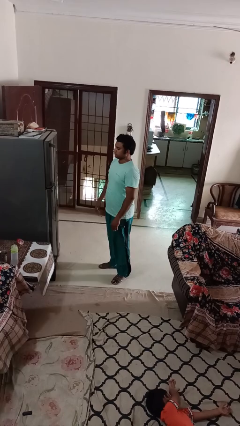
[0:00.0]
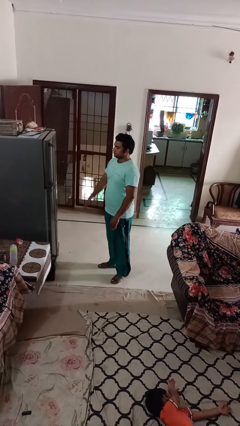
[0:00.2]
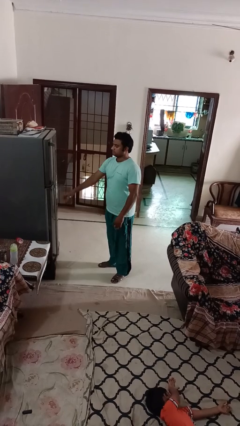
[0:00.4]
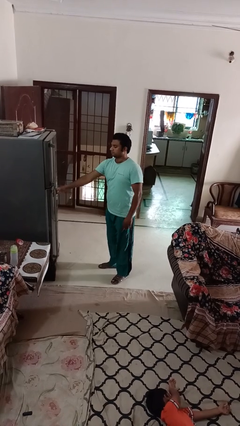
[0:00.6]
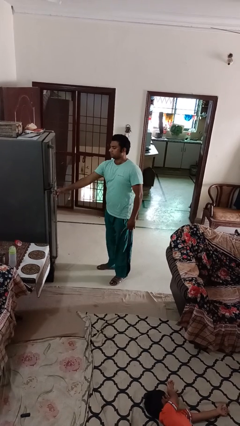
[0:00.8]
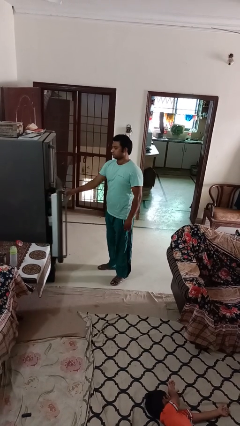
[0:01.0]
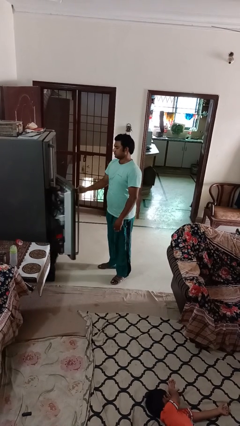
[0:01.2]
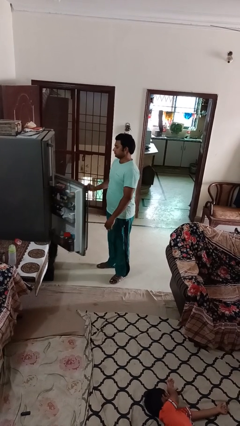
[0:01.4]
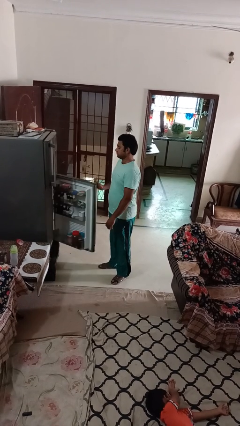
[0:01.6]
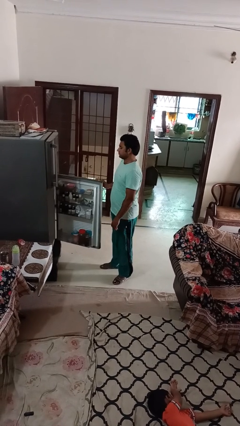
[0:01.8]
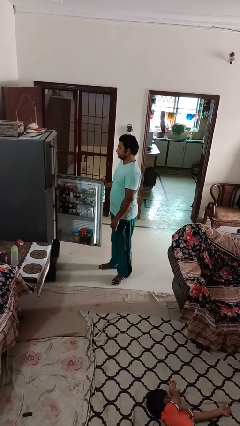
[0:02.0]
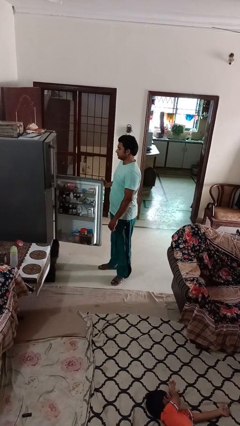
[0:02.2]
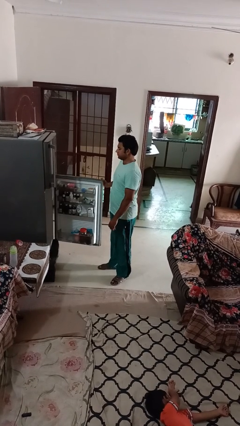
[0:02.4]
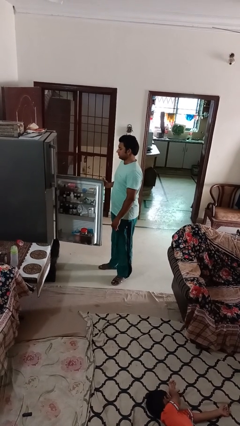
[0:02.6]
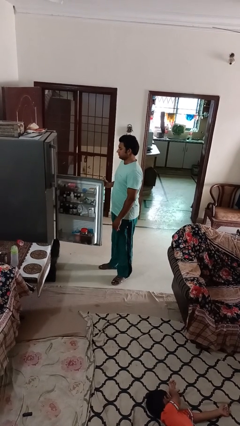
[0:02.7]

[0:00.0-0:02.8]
person opens refrigerator

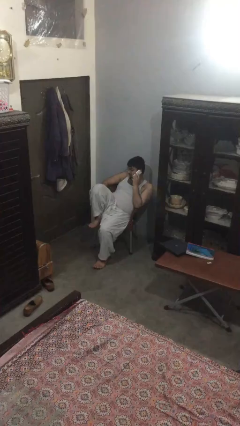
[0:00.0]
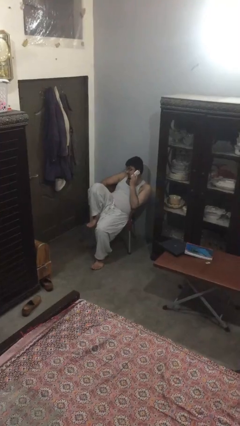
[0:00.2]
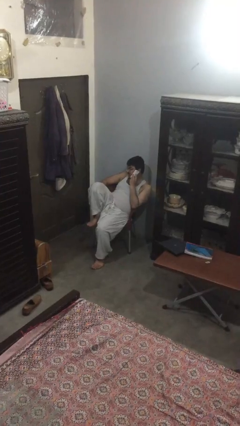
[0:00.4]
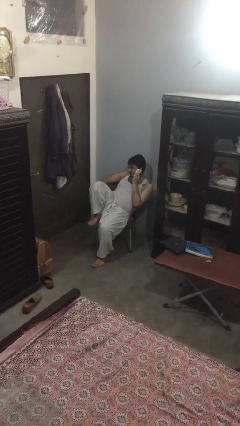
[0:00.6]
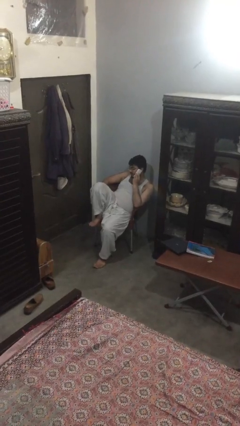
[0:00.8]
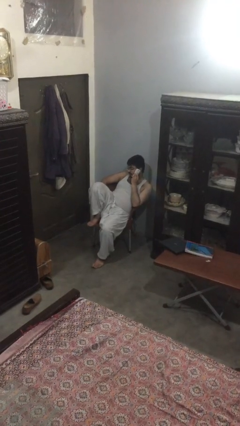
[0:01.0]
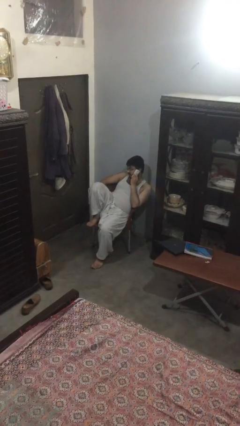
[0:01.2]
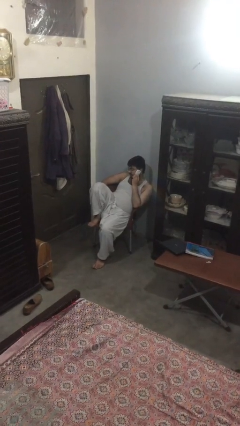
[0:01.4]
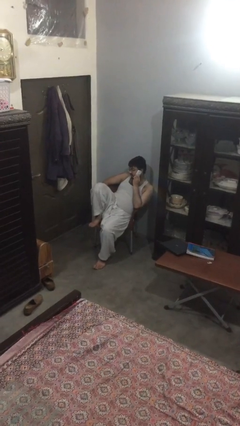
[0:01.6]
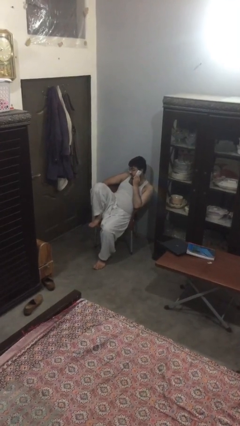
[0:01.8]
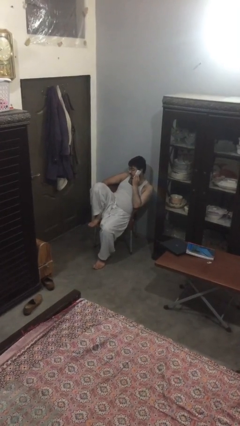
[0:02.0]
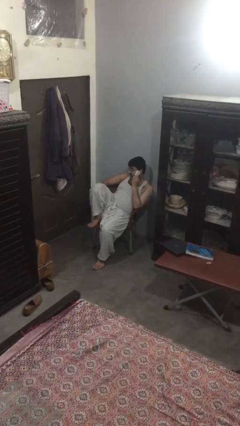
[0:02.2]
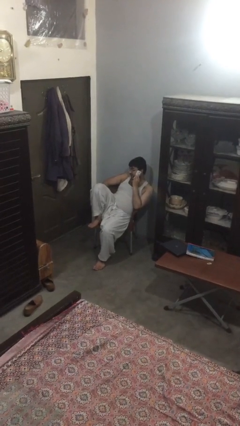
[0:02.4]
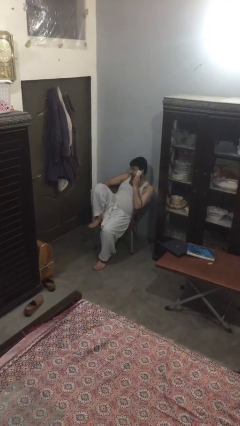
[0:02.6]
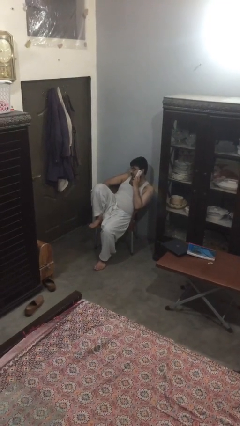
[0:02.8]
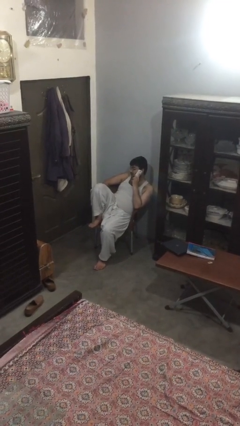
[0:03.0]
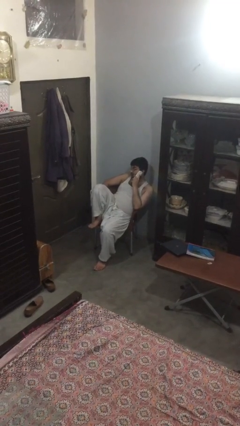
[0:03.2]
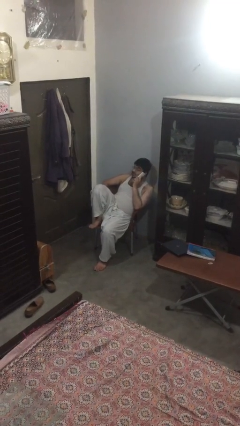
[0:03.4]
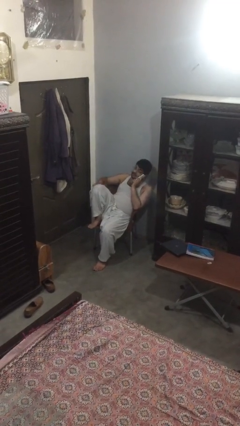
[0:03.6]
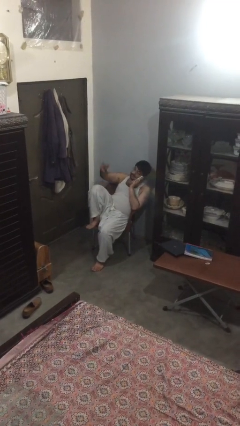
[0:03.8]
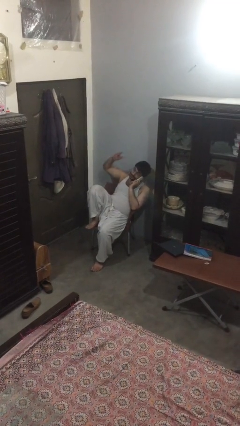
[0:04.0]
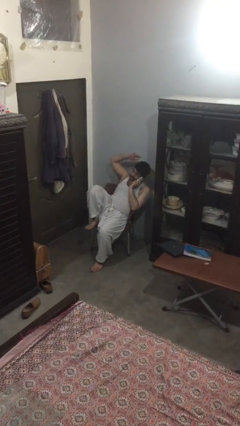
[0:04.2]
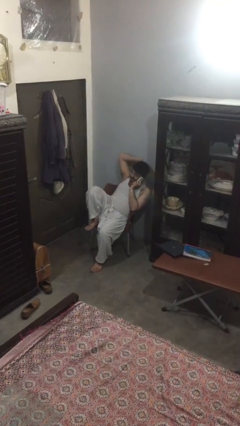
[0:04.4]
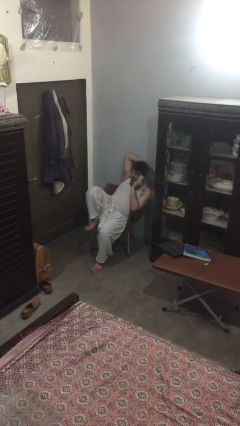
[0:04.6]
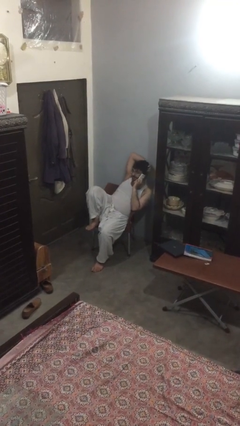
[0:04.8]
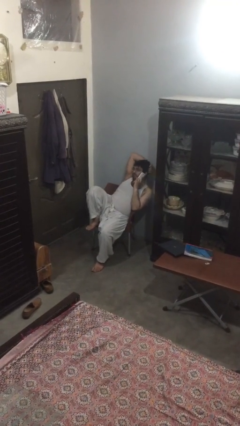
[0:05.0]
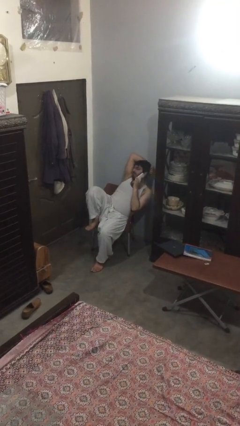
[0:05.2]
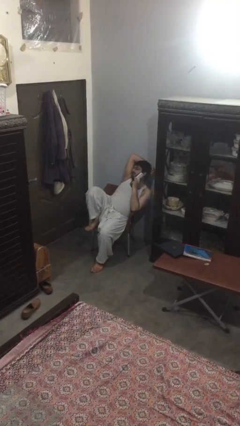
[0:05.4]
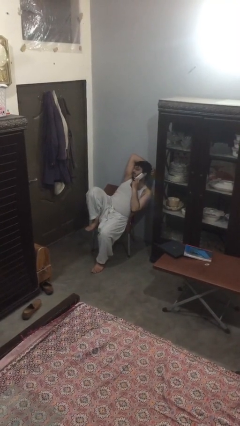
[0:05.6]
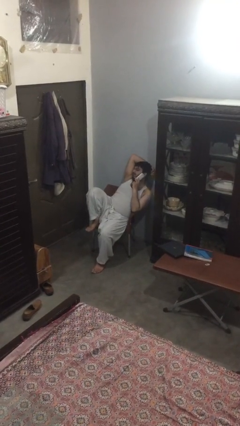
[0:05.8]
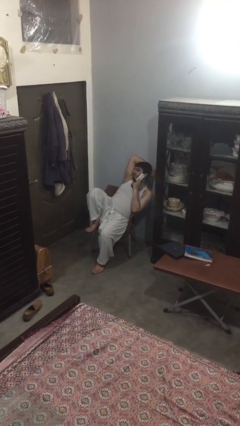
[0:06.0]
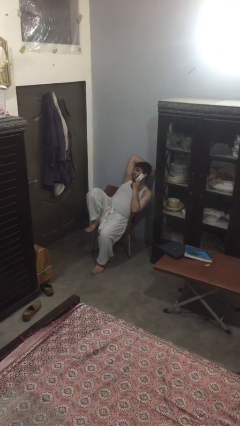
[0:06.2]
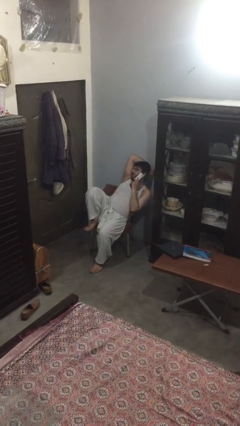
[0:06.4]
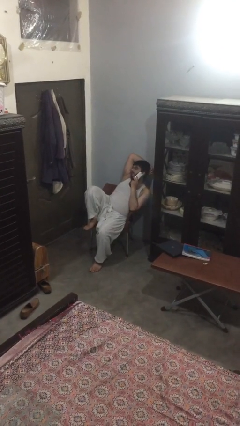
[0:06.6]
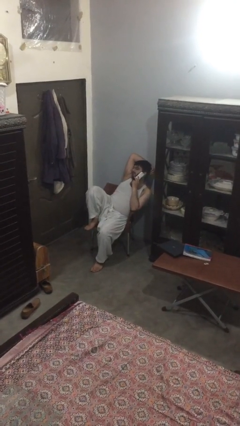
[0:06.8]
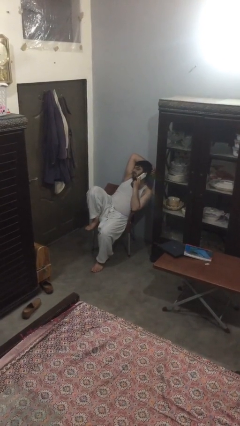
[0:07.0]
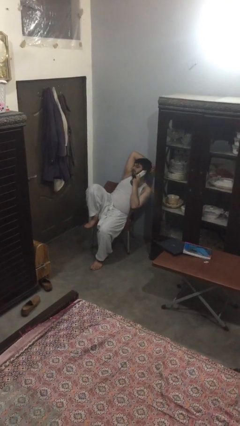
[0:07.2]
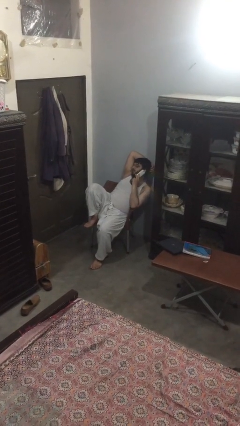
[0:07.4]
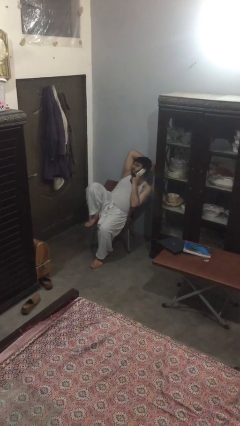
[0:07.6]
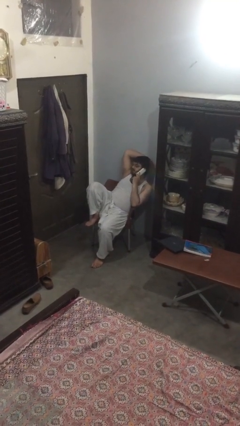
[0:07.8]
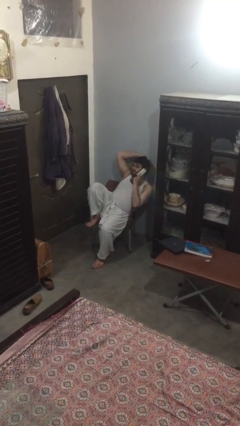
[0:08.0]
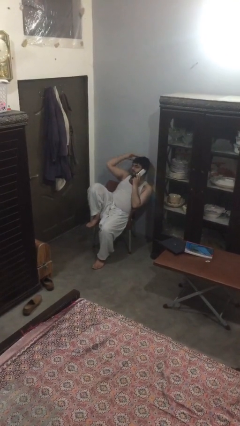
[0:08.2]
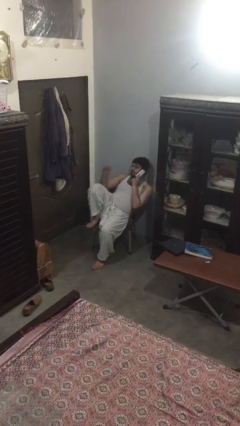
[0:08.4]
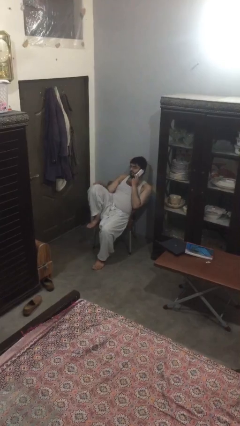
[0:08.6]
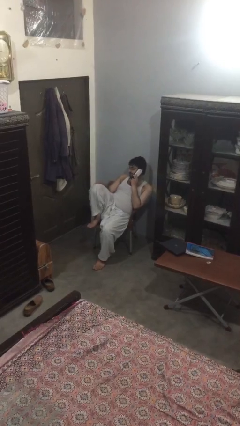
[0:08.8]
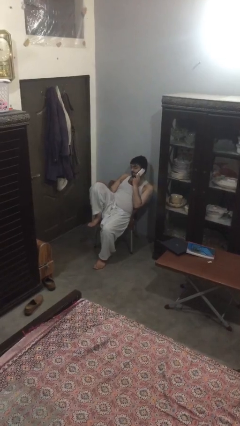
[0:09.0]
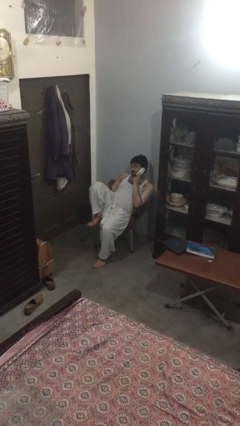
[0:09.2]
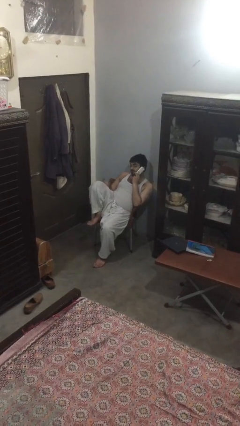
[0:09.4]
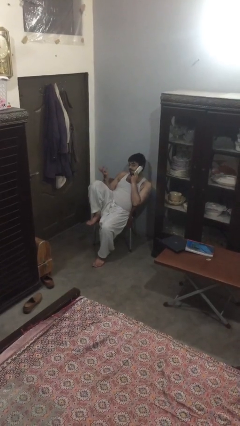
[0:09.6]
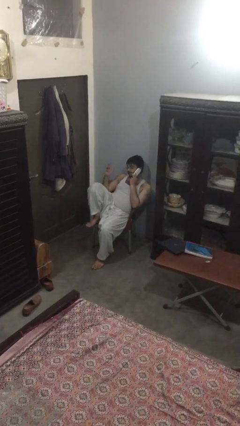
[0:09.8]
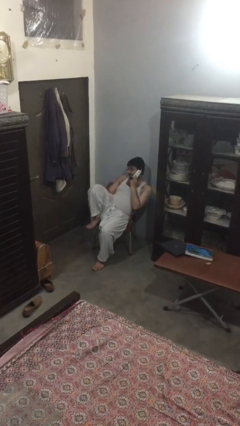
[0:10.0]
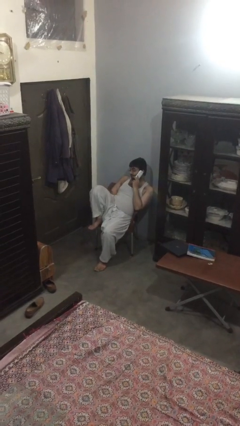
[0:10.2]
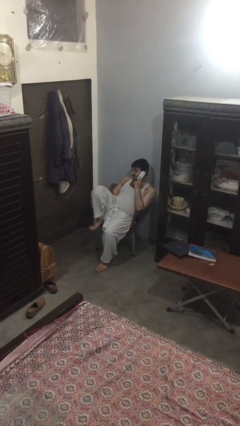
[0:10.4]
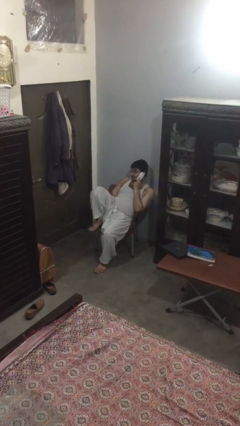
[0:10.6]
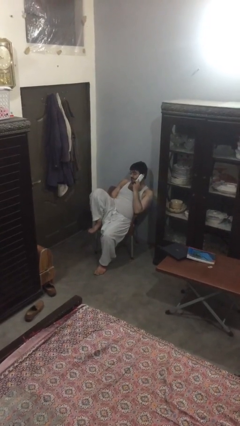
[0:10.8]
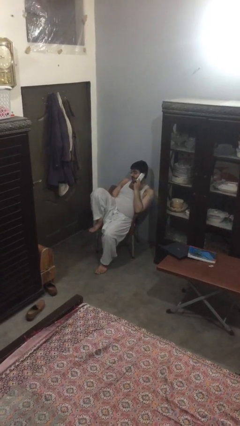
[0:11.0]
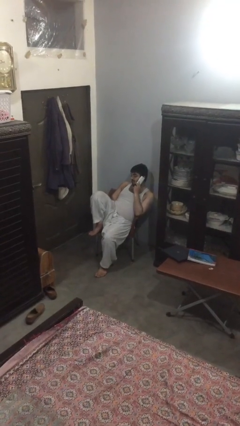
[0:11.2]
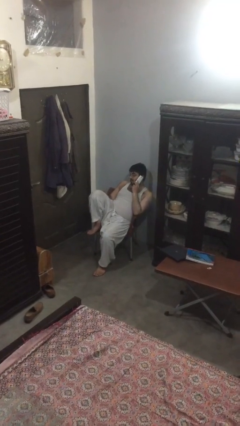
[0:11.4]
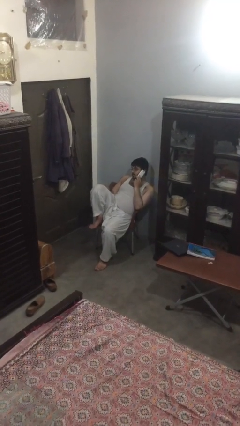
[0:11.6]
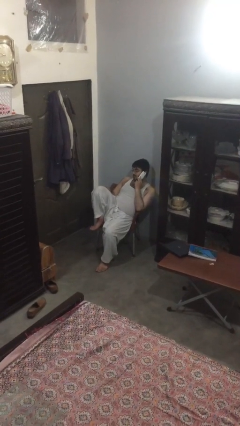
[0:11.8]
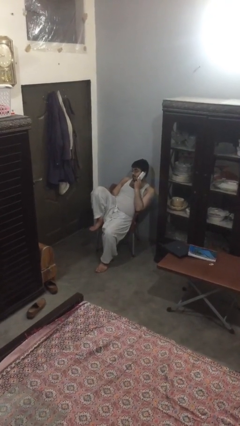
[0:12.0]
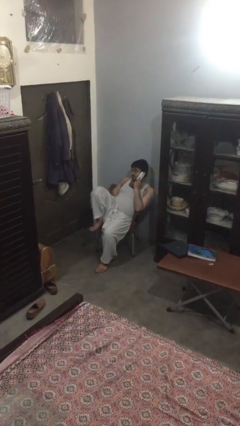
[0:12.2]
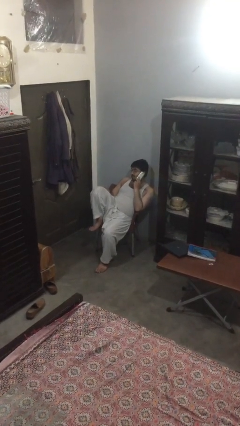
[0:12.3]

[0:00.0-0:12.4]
person talks on phone

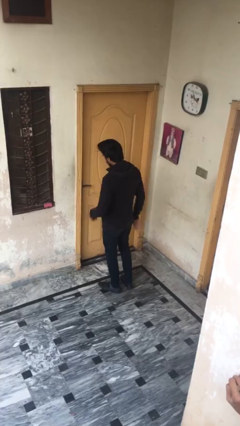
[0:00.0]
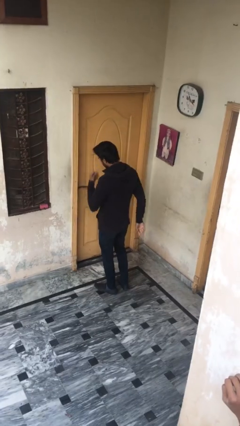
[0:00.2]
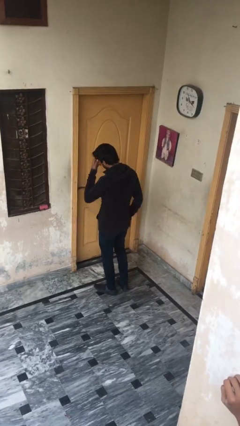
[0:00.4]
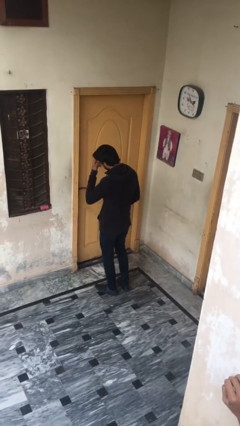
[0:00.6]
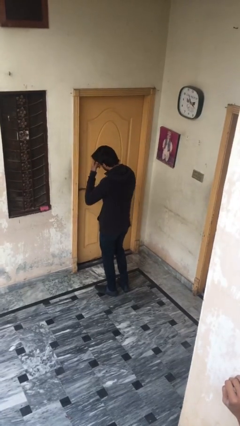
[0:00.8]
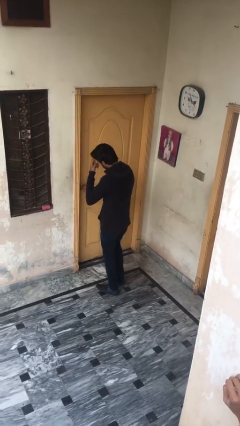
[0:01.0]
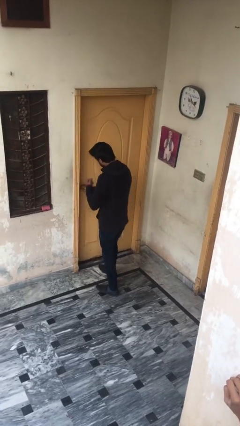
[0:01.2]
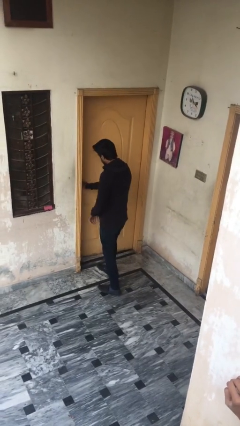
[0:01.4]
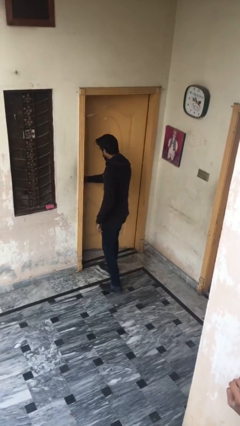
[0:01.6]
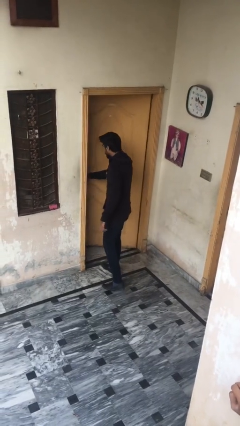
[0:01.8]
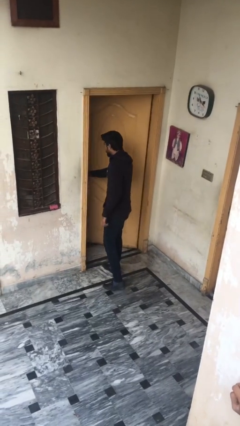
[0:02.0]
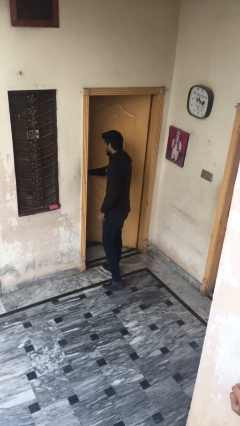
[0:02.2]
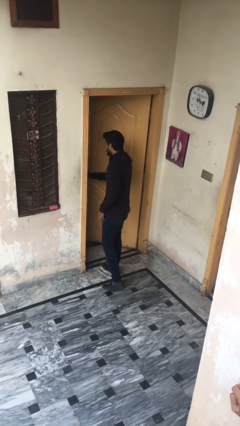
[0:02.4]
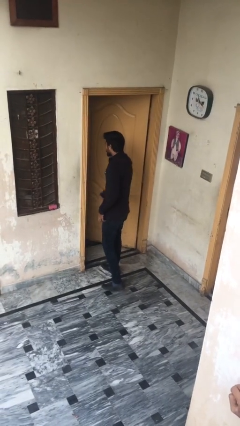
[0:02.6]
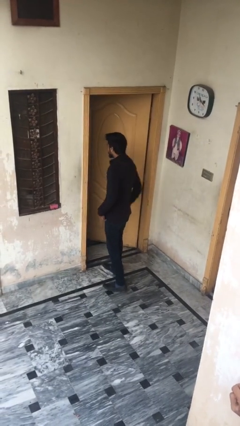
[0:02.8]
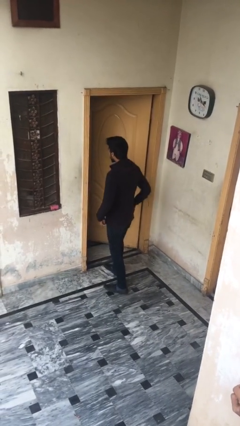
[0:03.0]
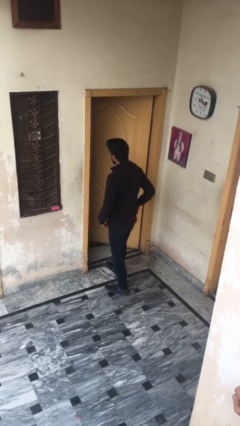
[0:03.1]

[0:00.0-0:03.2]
person opens facility door
